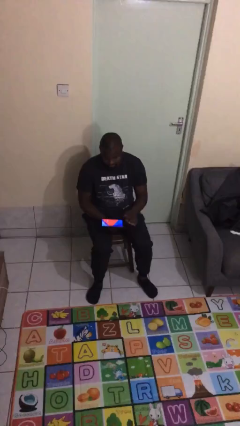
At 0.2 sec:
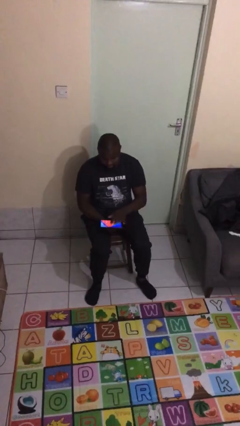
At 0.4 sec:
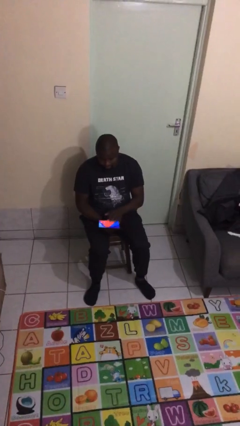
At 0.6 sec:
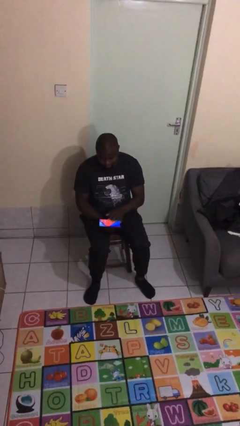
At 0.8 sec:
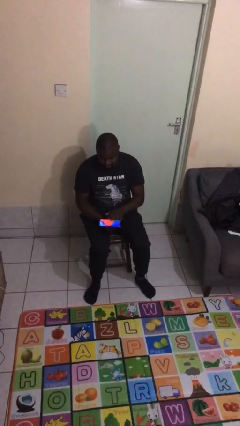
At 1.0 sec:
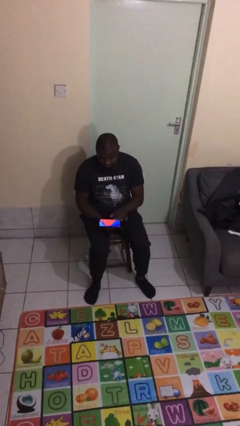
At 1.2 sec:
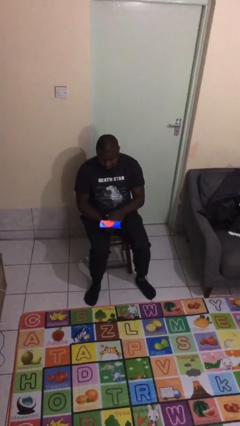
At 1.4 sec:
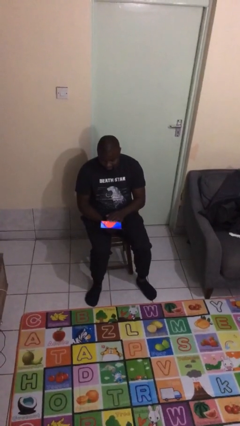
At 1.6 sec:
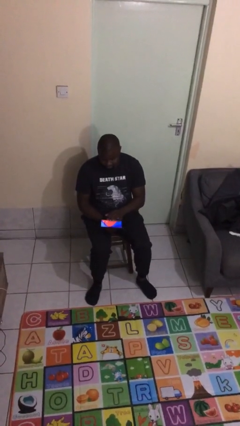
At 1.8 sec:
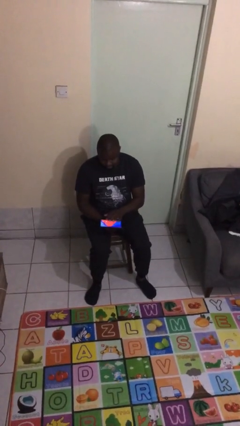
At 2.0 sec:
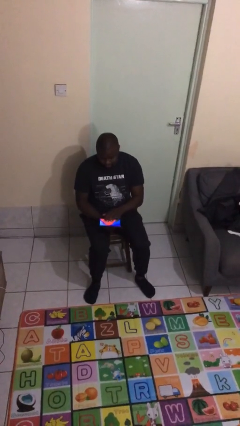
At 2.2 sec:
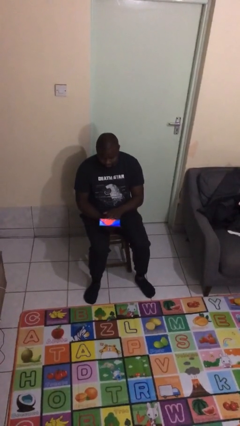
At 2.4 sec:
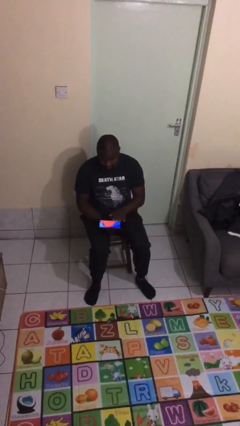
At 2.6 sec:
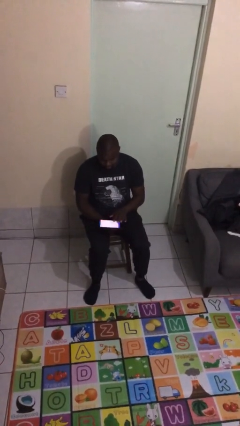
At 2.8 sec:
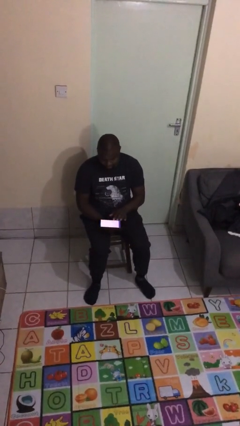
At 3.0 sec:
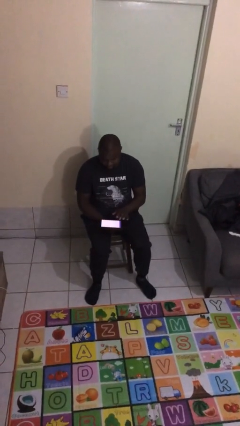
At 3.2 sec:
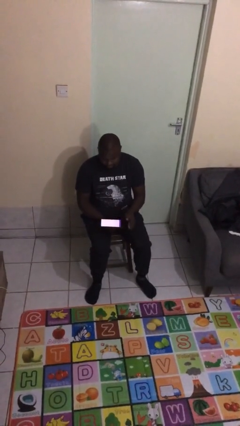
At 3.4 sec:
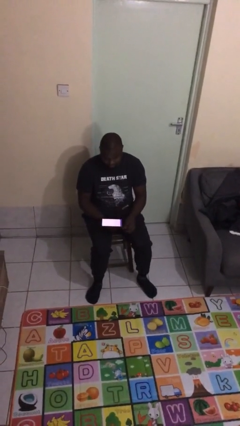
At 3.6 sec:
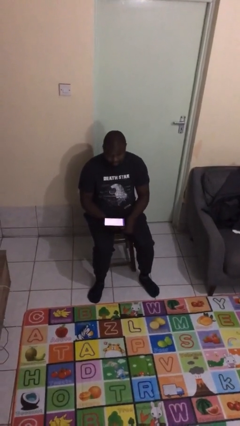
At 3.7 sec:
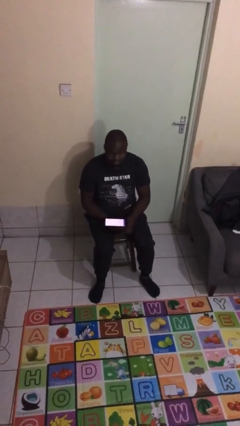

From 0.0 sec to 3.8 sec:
person interacts with tablet

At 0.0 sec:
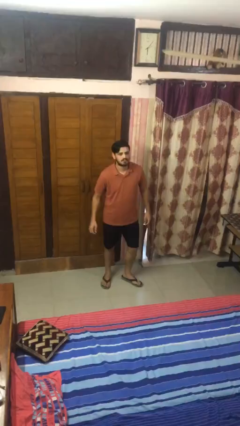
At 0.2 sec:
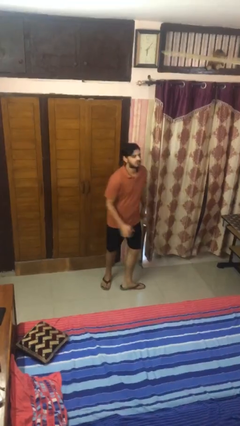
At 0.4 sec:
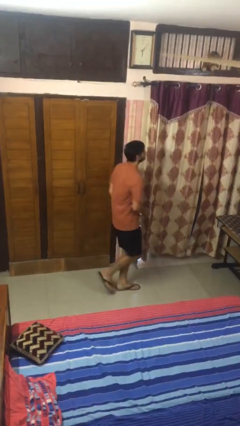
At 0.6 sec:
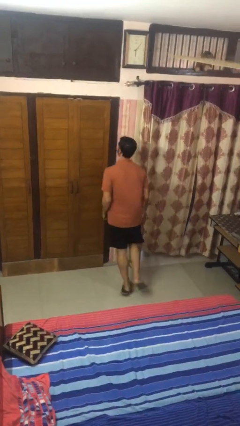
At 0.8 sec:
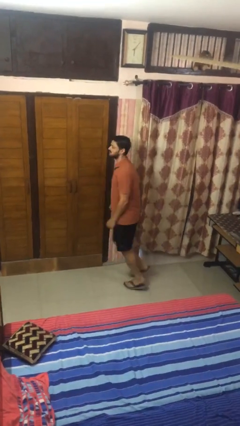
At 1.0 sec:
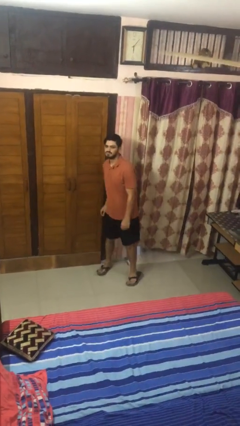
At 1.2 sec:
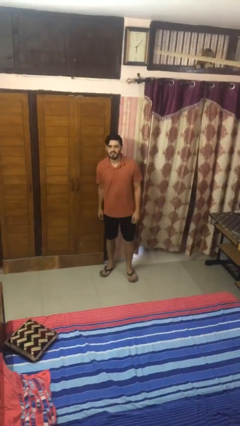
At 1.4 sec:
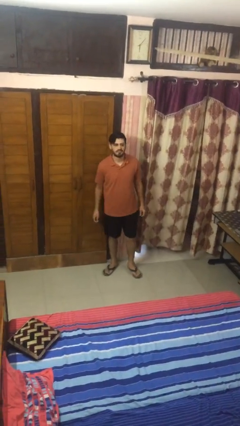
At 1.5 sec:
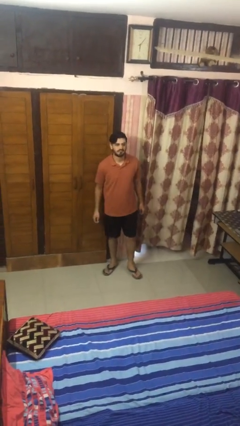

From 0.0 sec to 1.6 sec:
person twirls

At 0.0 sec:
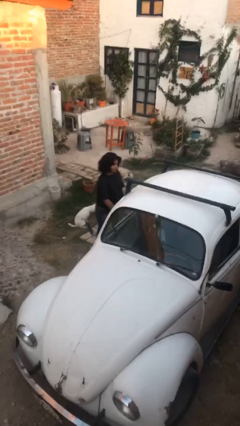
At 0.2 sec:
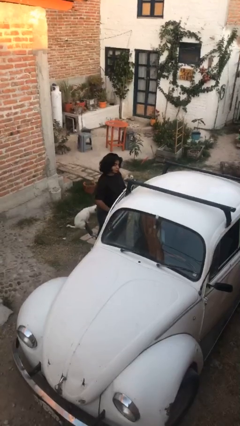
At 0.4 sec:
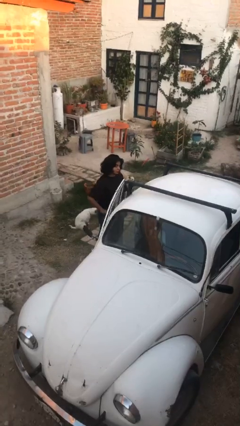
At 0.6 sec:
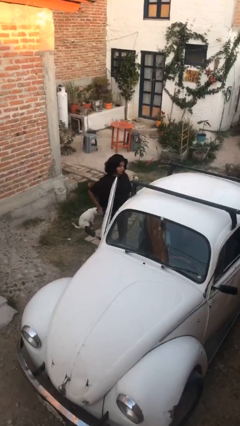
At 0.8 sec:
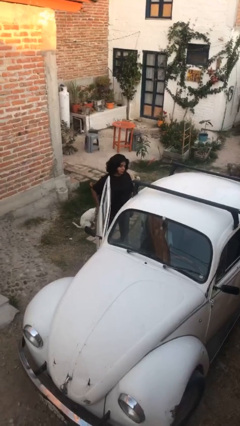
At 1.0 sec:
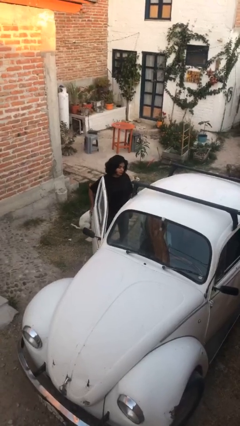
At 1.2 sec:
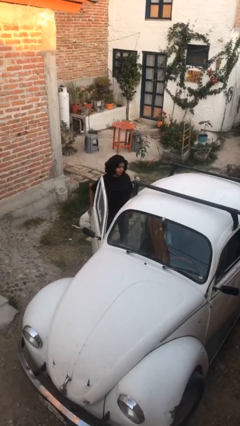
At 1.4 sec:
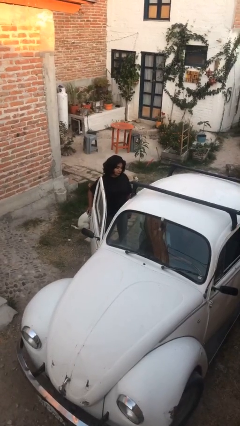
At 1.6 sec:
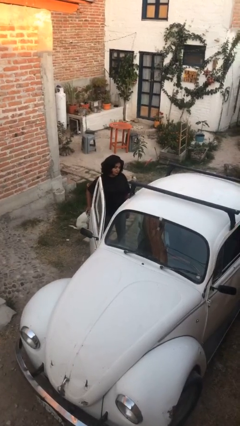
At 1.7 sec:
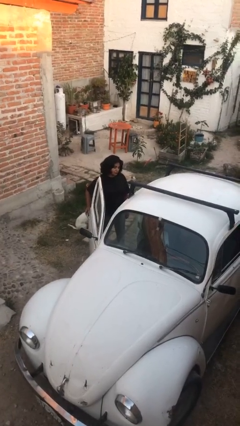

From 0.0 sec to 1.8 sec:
person opens car door

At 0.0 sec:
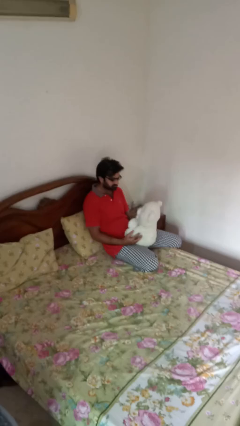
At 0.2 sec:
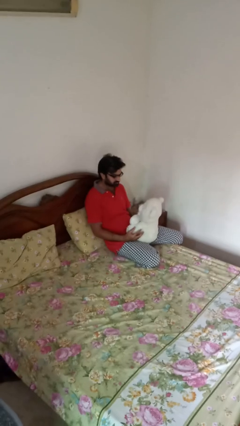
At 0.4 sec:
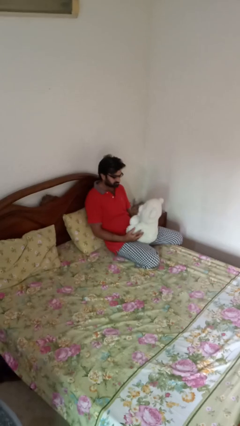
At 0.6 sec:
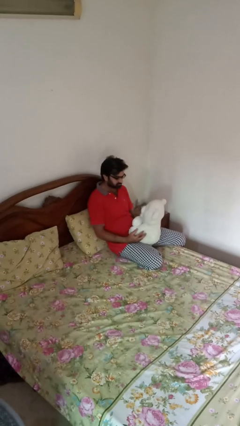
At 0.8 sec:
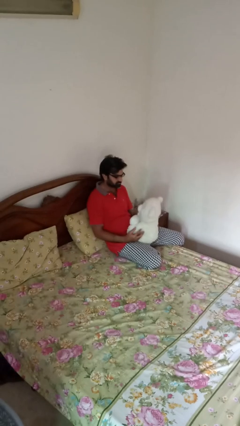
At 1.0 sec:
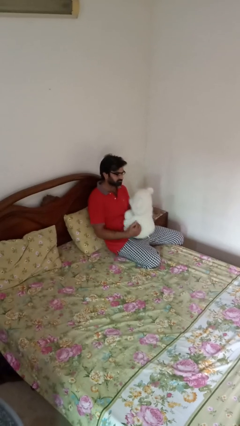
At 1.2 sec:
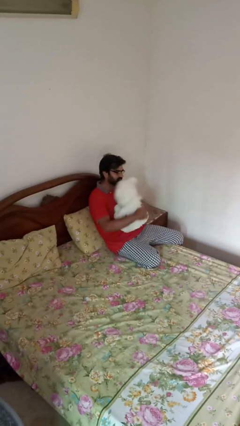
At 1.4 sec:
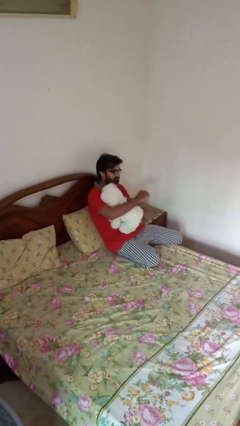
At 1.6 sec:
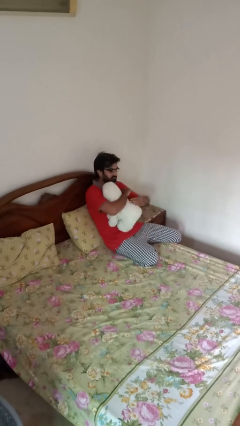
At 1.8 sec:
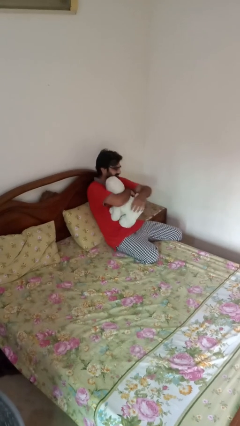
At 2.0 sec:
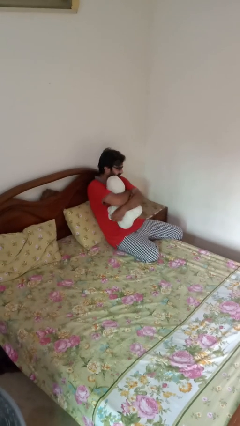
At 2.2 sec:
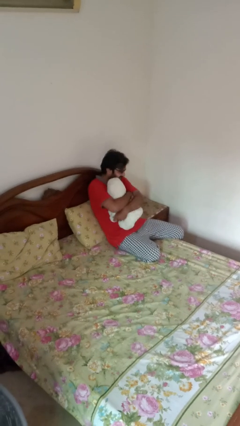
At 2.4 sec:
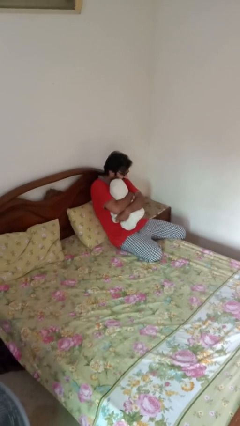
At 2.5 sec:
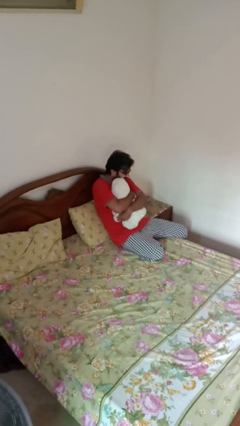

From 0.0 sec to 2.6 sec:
person hugs stuffed animal

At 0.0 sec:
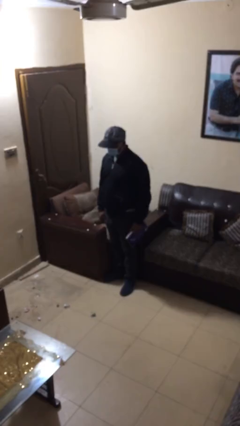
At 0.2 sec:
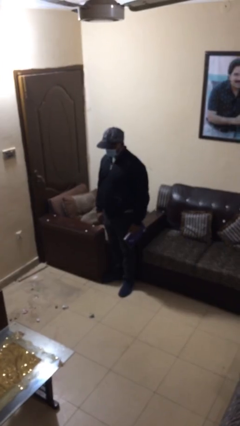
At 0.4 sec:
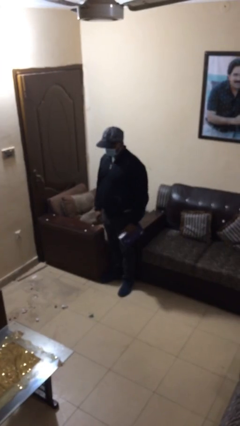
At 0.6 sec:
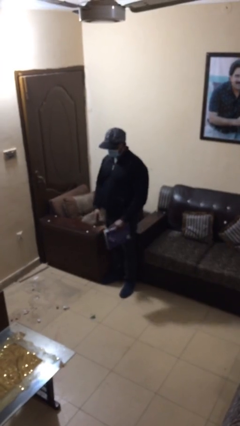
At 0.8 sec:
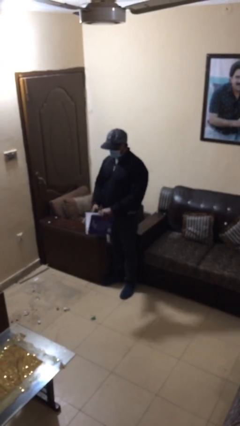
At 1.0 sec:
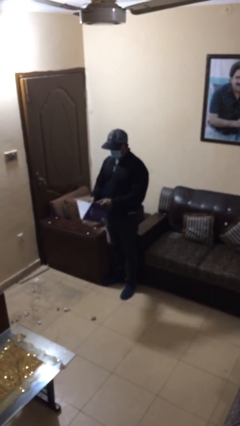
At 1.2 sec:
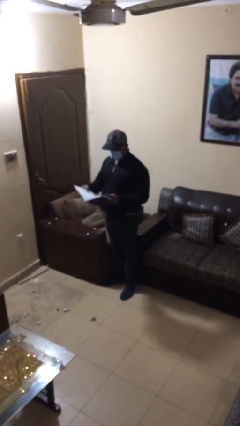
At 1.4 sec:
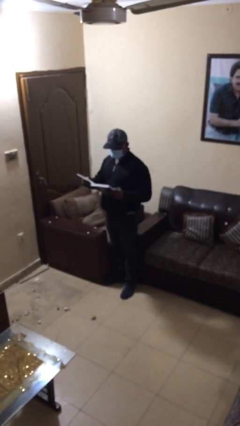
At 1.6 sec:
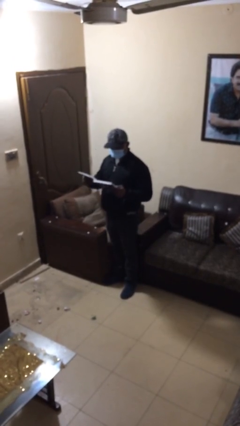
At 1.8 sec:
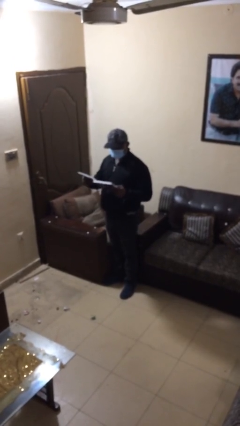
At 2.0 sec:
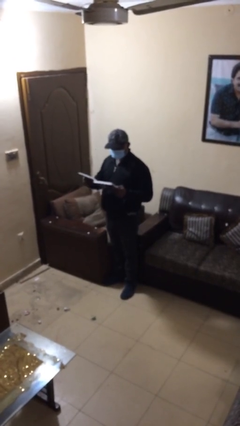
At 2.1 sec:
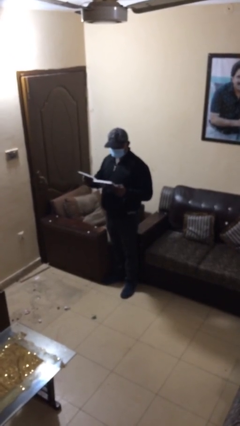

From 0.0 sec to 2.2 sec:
person reads document

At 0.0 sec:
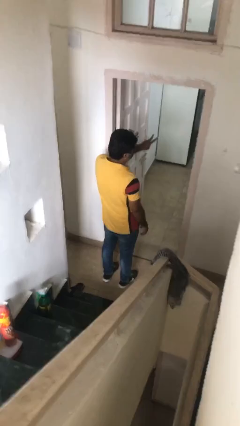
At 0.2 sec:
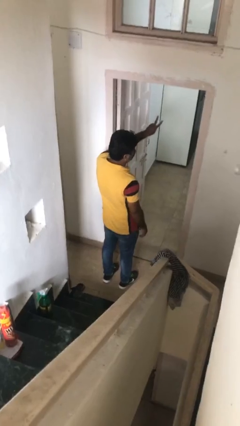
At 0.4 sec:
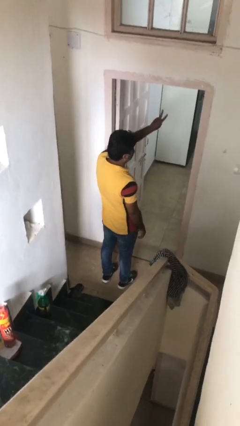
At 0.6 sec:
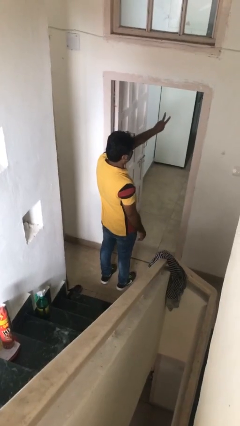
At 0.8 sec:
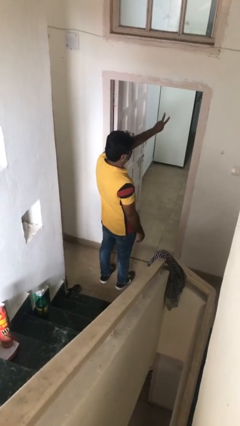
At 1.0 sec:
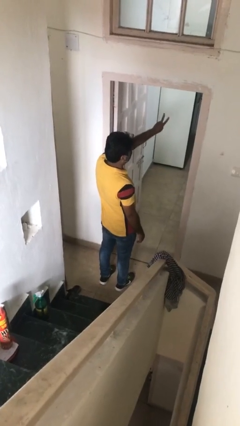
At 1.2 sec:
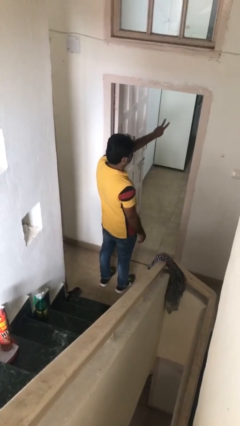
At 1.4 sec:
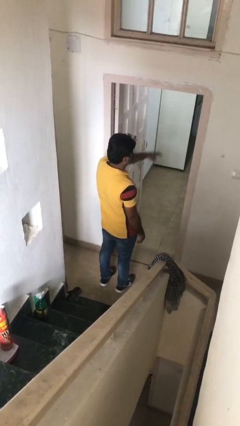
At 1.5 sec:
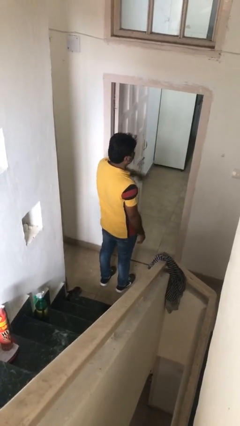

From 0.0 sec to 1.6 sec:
person gestures peace

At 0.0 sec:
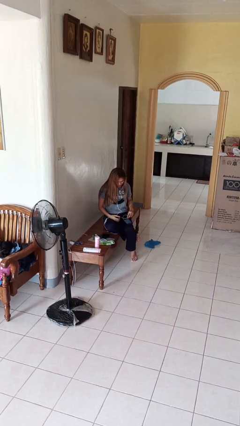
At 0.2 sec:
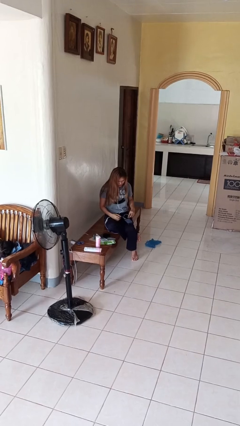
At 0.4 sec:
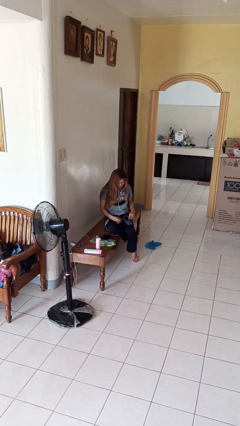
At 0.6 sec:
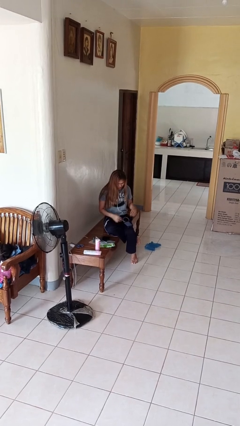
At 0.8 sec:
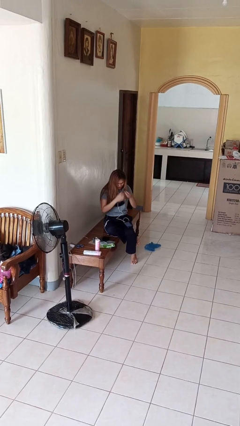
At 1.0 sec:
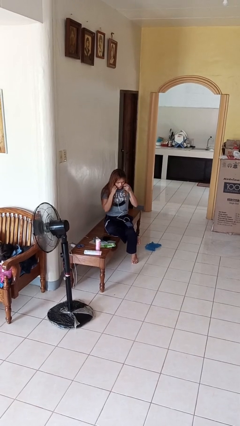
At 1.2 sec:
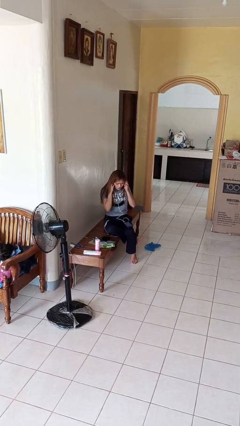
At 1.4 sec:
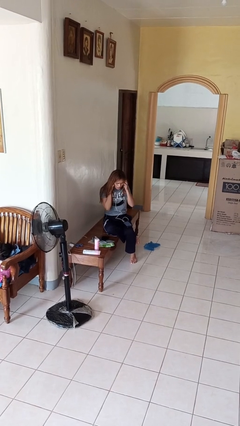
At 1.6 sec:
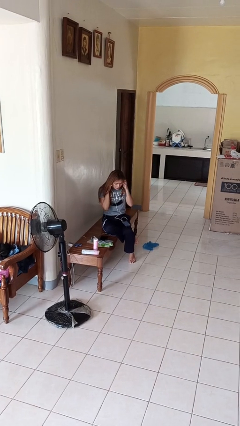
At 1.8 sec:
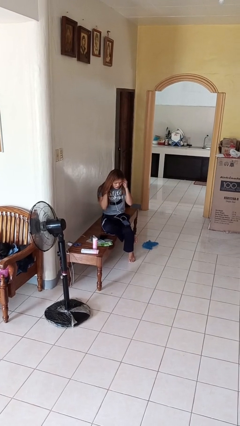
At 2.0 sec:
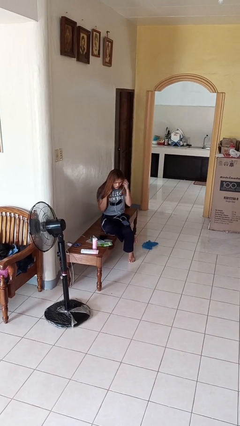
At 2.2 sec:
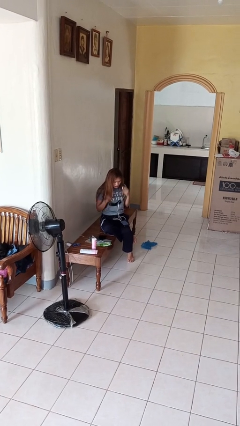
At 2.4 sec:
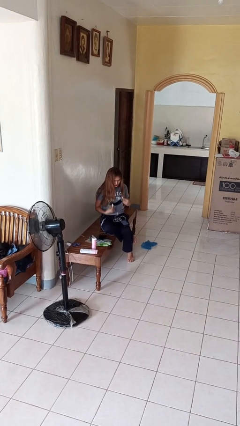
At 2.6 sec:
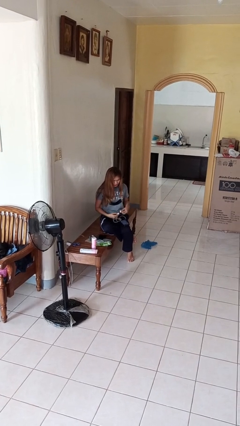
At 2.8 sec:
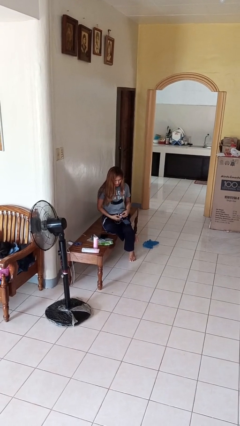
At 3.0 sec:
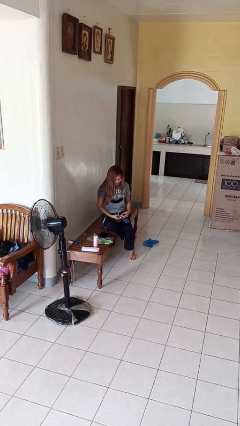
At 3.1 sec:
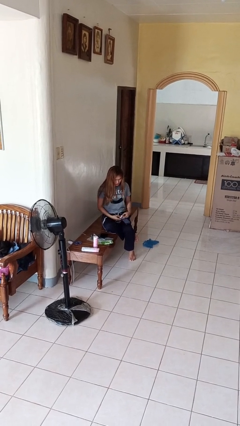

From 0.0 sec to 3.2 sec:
person takes off headphones

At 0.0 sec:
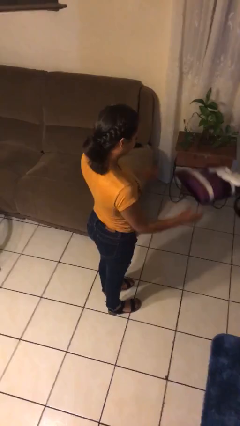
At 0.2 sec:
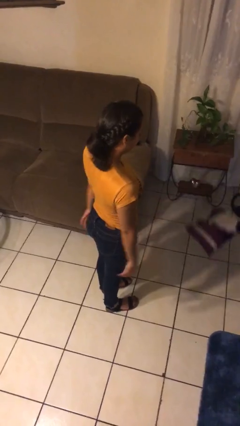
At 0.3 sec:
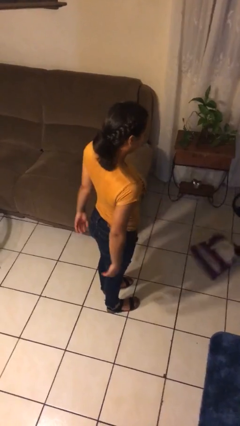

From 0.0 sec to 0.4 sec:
person throws object to ground
